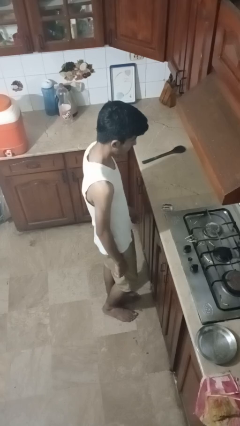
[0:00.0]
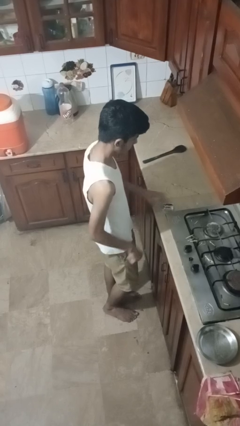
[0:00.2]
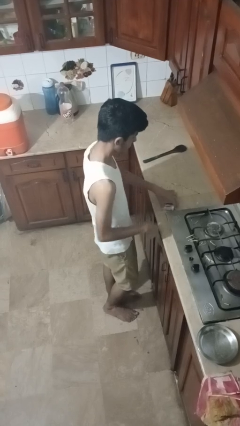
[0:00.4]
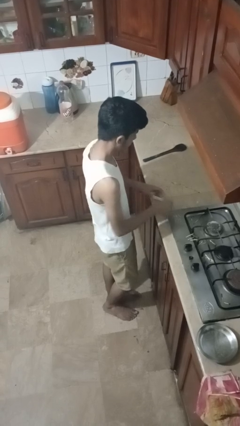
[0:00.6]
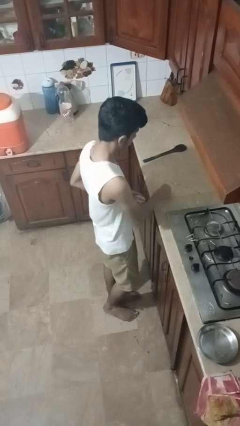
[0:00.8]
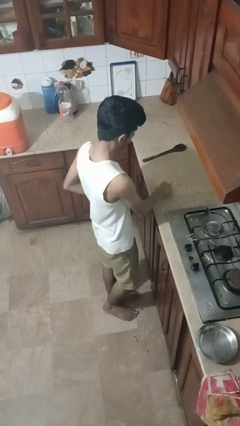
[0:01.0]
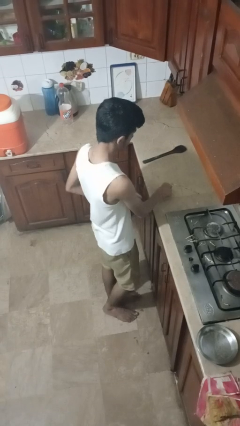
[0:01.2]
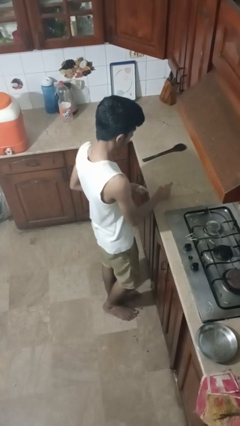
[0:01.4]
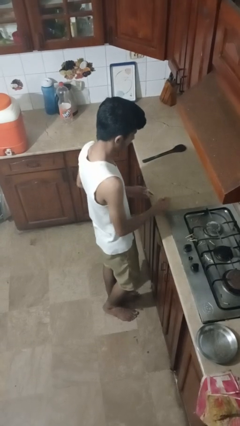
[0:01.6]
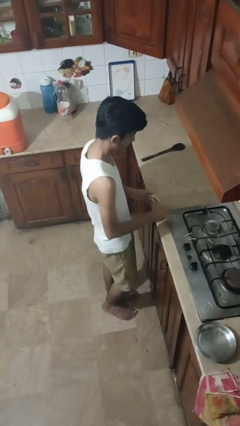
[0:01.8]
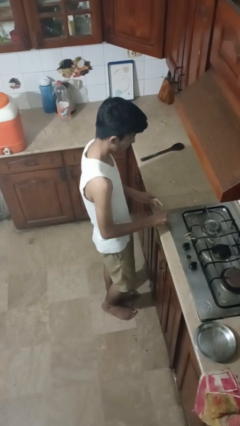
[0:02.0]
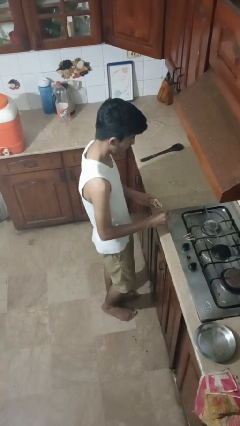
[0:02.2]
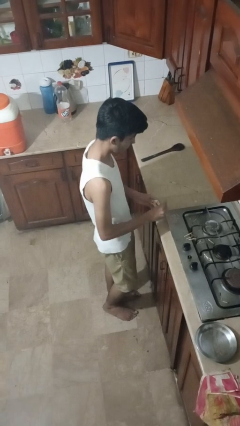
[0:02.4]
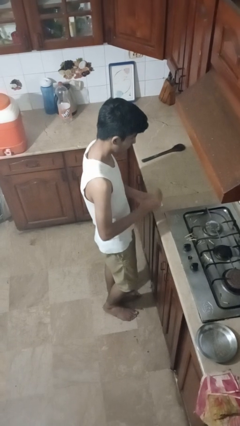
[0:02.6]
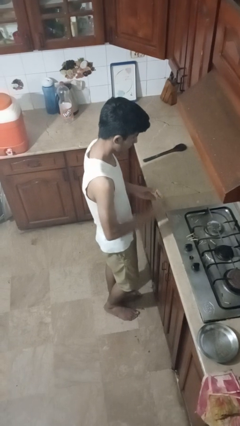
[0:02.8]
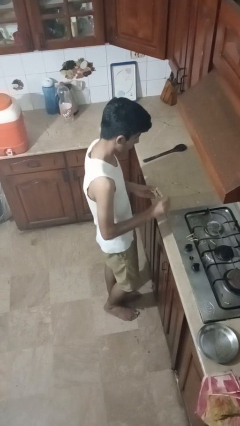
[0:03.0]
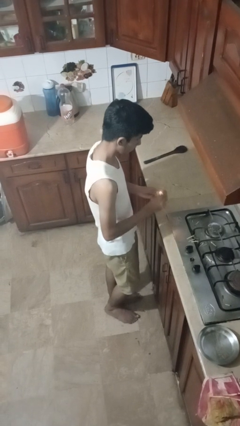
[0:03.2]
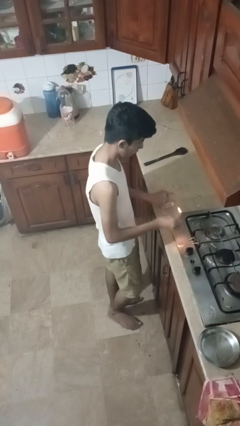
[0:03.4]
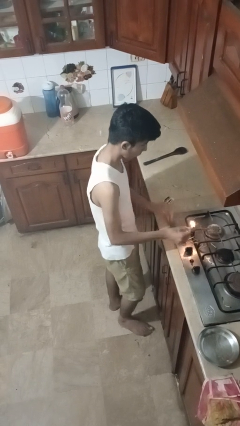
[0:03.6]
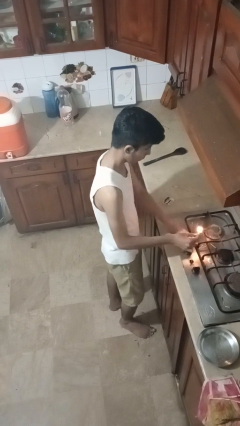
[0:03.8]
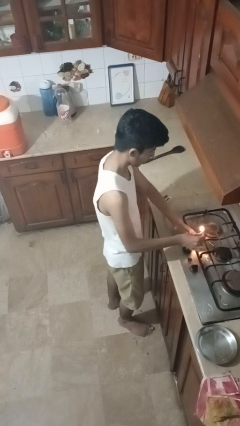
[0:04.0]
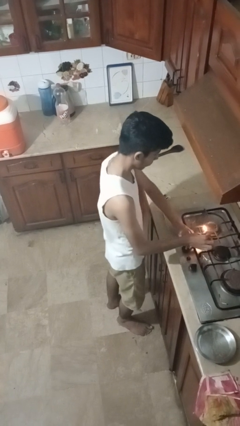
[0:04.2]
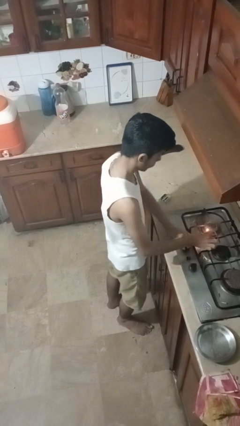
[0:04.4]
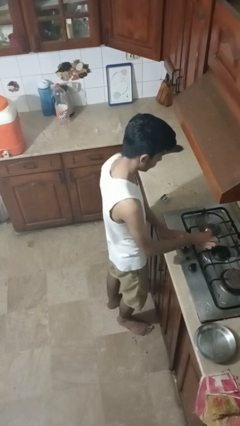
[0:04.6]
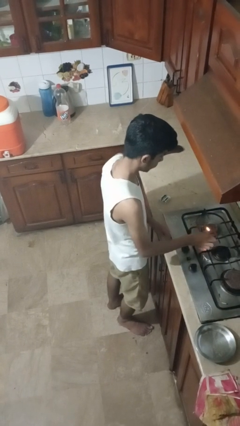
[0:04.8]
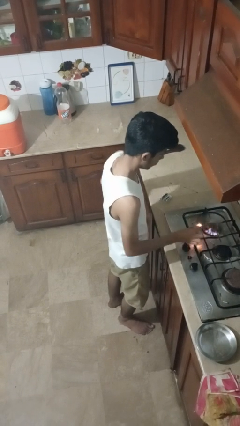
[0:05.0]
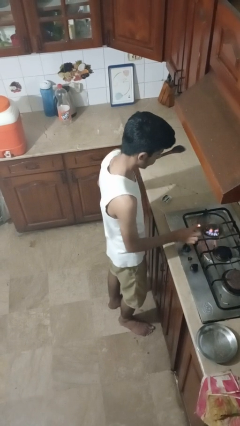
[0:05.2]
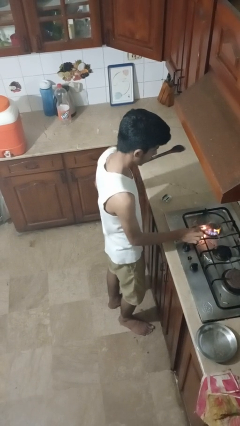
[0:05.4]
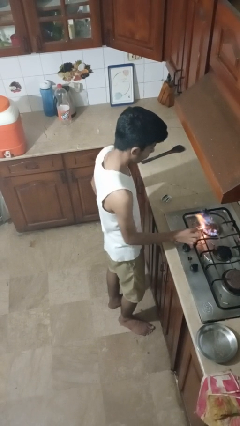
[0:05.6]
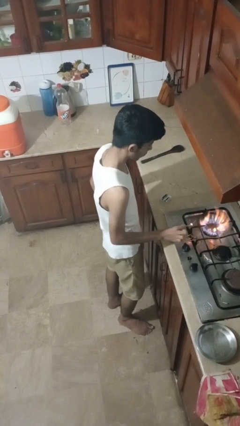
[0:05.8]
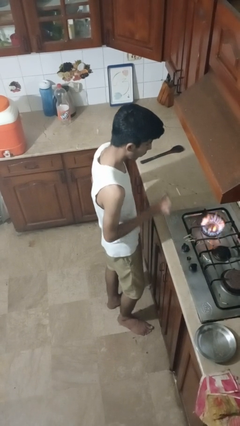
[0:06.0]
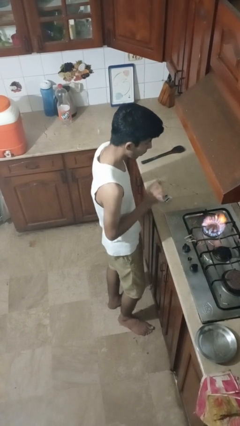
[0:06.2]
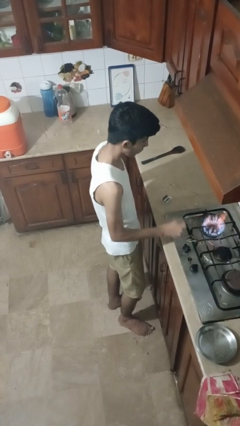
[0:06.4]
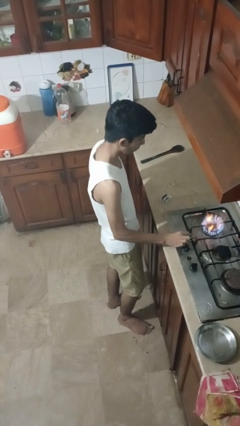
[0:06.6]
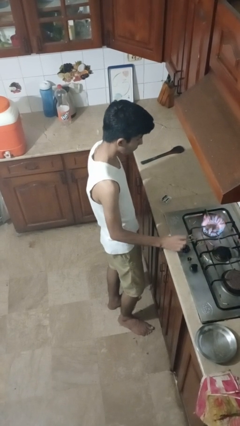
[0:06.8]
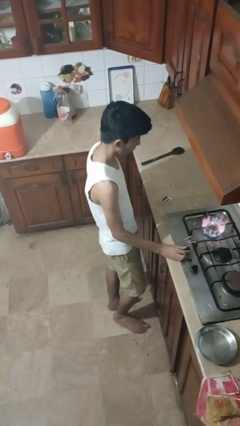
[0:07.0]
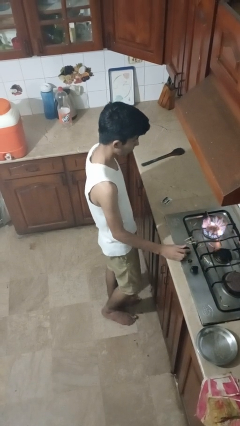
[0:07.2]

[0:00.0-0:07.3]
person turns on stovetop

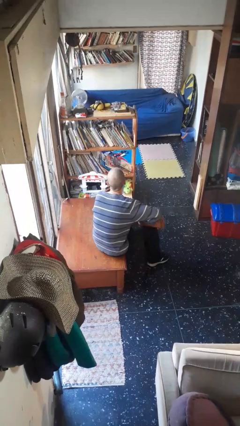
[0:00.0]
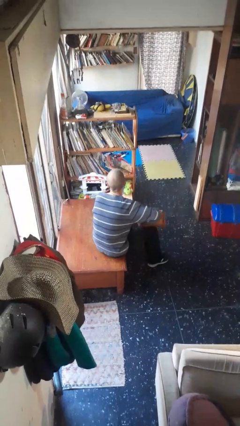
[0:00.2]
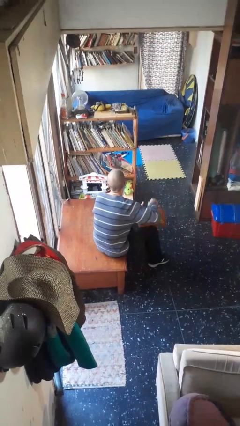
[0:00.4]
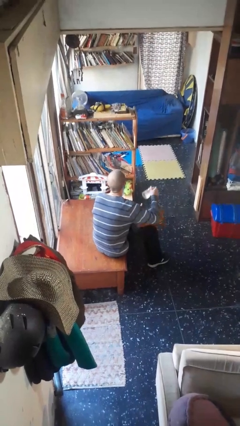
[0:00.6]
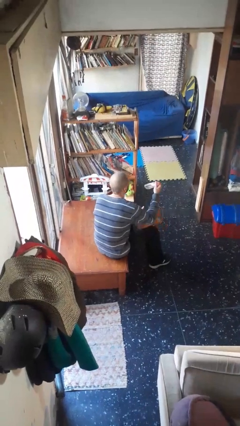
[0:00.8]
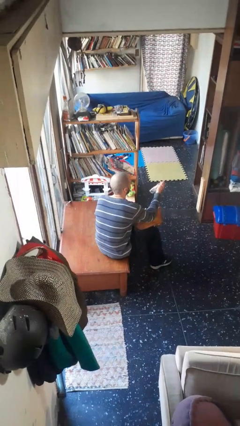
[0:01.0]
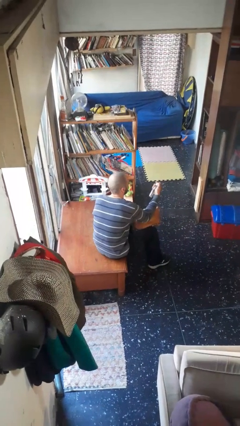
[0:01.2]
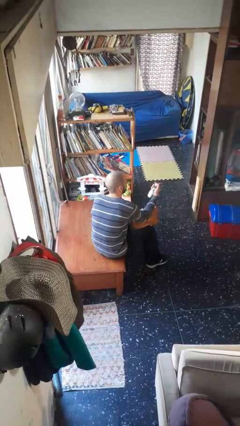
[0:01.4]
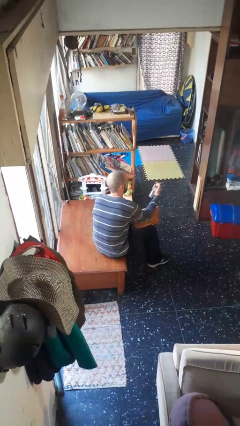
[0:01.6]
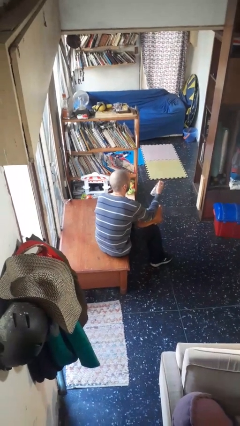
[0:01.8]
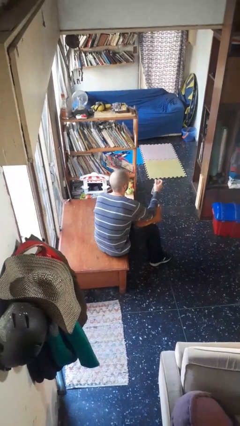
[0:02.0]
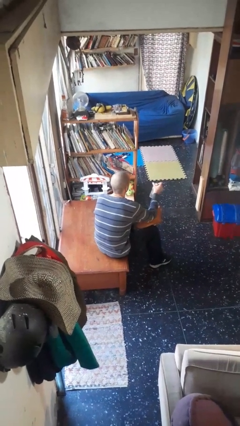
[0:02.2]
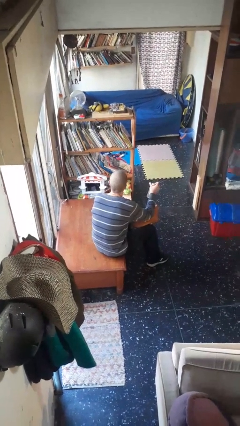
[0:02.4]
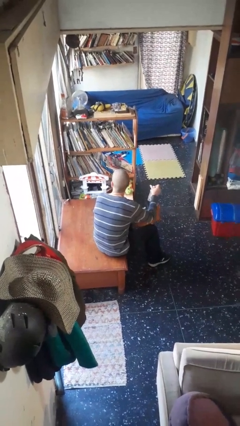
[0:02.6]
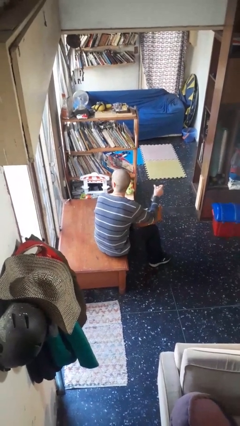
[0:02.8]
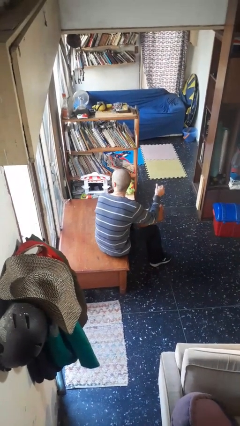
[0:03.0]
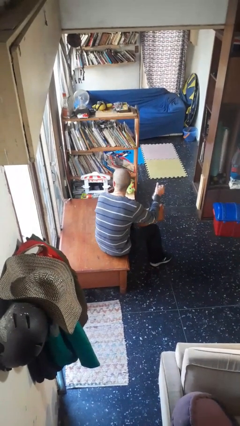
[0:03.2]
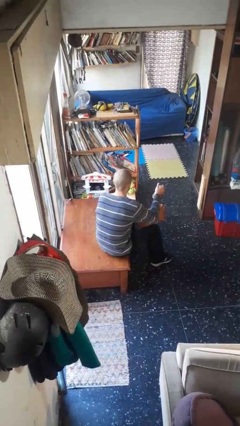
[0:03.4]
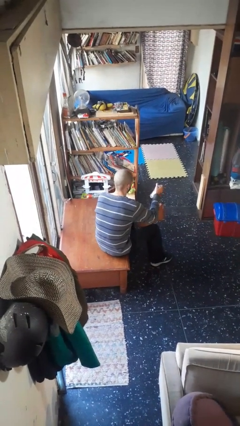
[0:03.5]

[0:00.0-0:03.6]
person takes object from purse

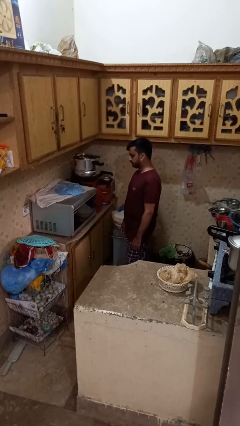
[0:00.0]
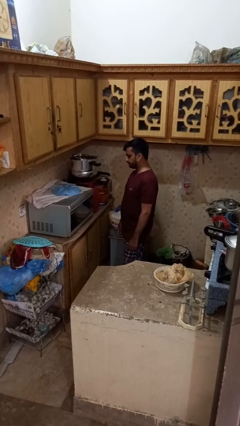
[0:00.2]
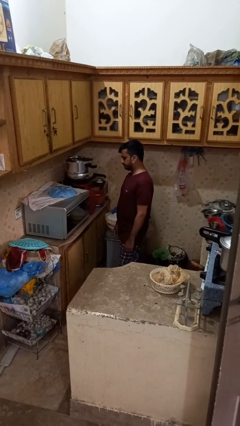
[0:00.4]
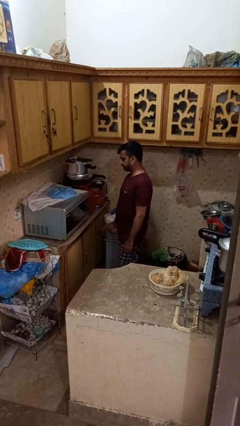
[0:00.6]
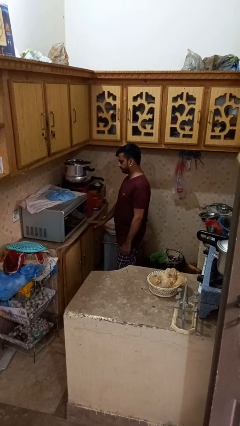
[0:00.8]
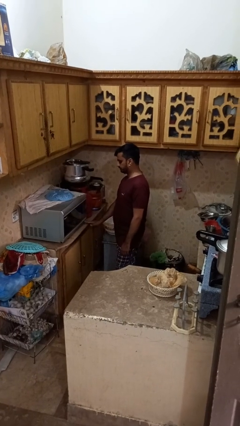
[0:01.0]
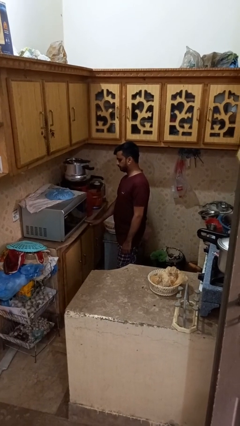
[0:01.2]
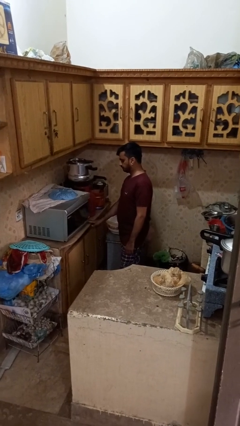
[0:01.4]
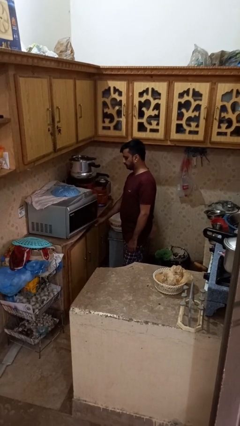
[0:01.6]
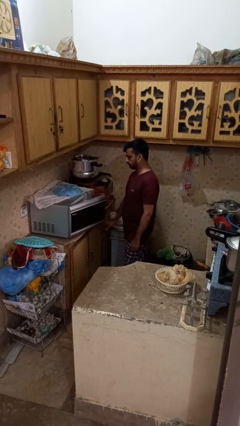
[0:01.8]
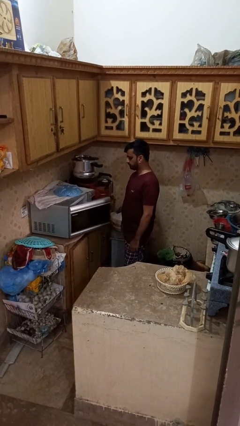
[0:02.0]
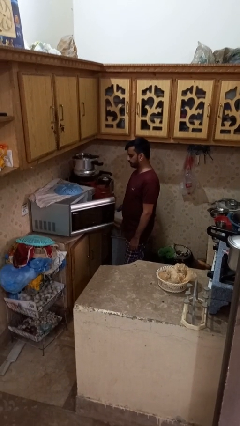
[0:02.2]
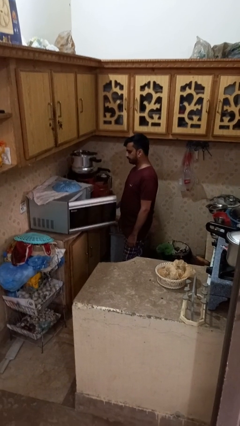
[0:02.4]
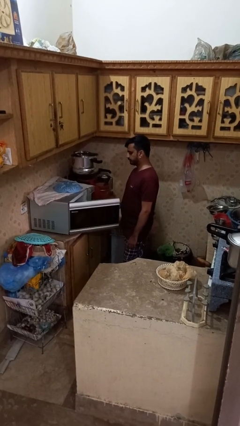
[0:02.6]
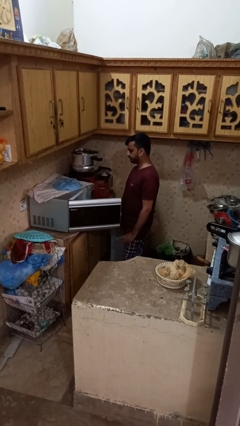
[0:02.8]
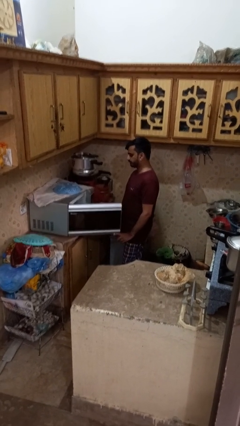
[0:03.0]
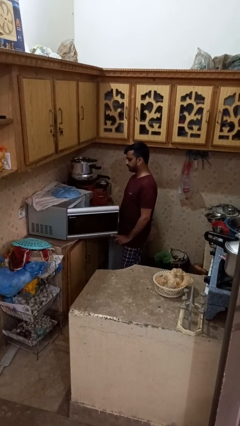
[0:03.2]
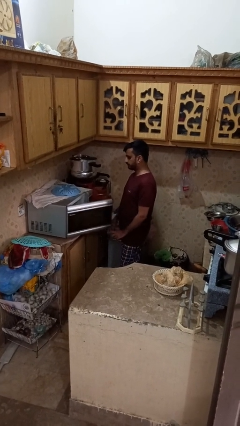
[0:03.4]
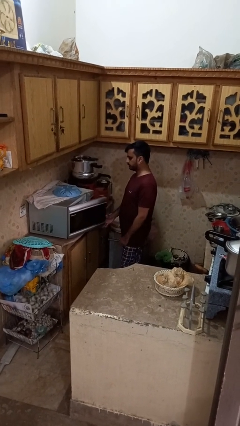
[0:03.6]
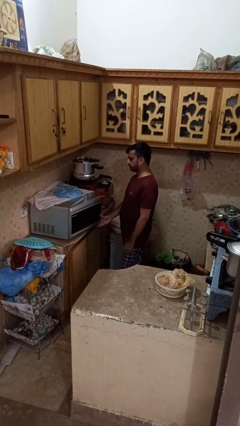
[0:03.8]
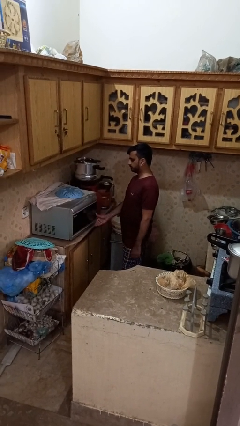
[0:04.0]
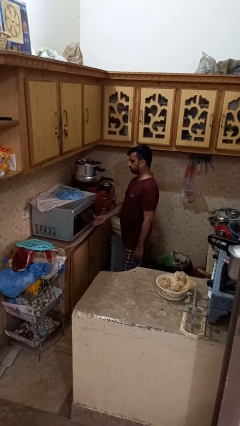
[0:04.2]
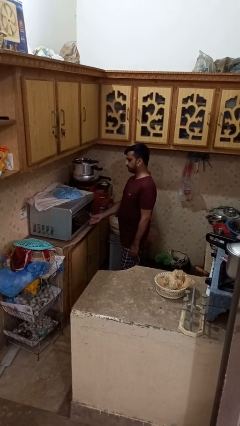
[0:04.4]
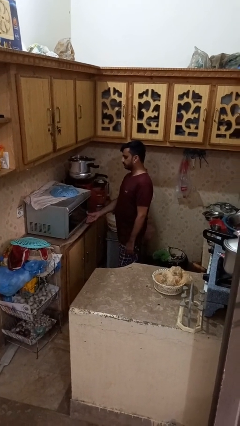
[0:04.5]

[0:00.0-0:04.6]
person opens microwave

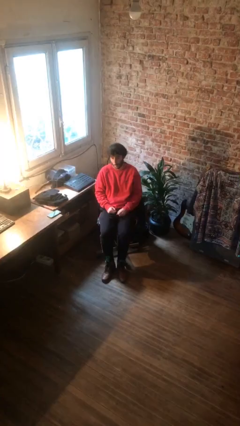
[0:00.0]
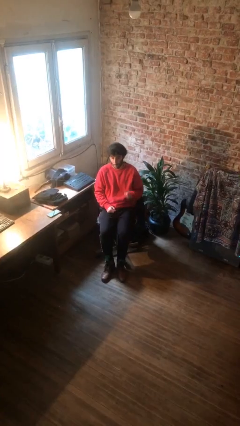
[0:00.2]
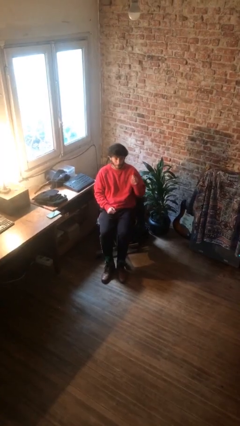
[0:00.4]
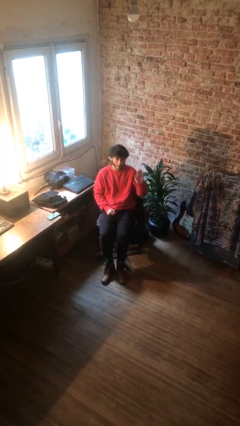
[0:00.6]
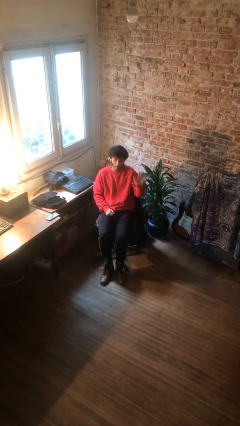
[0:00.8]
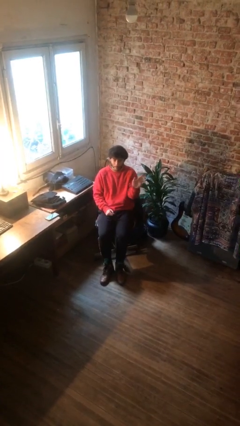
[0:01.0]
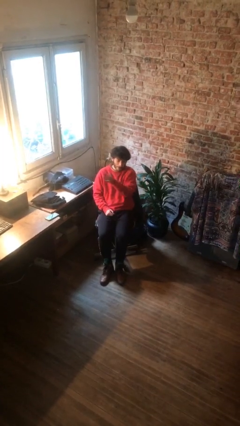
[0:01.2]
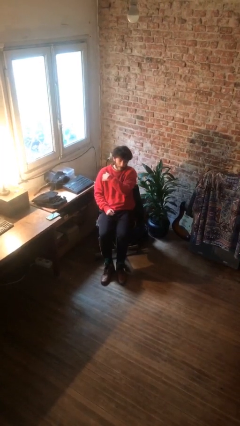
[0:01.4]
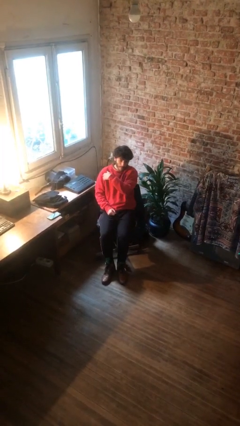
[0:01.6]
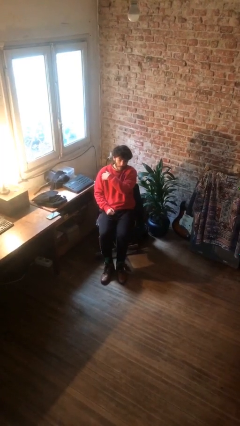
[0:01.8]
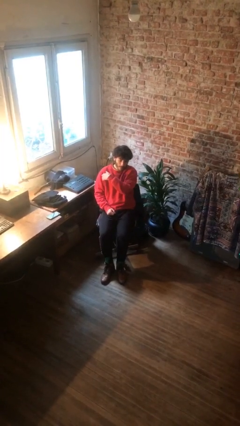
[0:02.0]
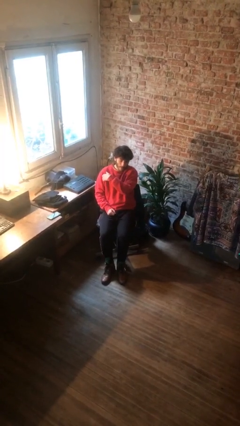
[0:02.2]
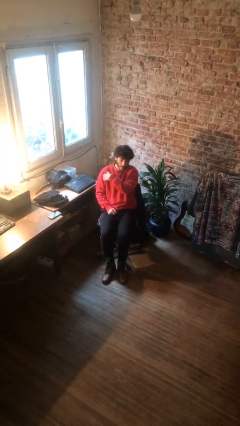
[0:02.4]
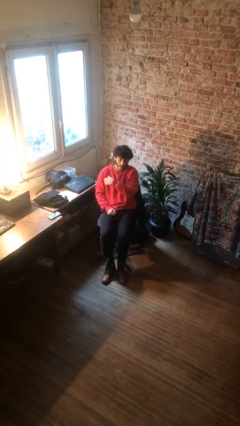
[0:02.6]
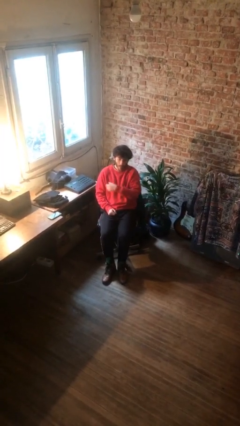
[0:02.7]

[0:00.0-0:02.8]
person gestures swipe right
